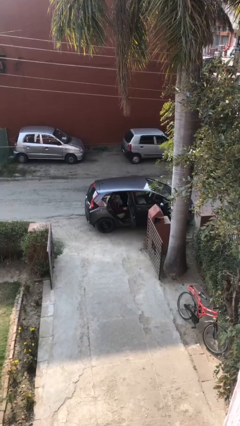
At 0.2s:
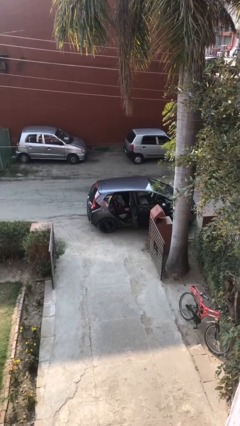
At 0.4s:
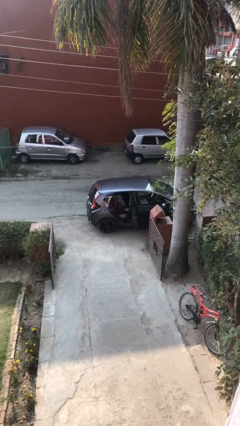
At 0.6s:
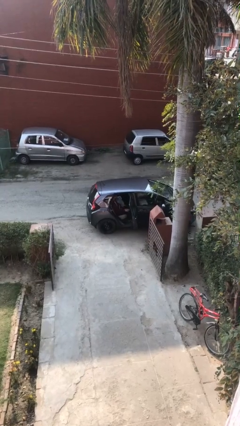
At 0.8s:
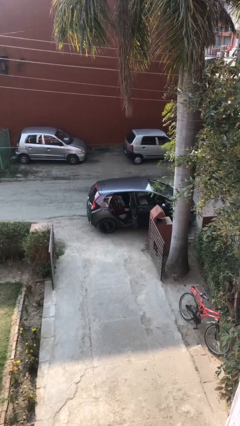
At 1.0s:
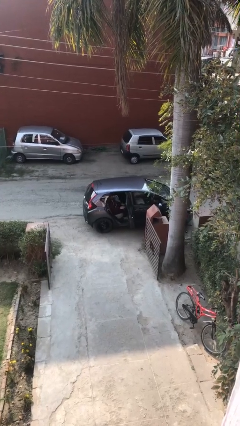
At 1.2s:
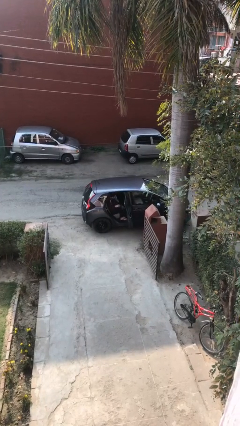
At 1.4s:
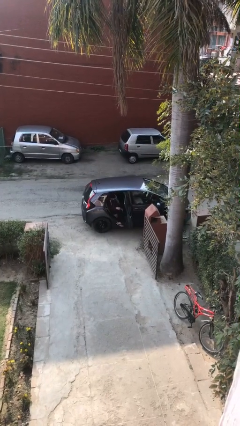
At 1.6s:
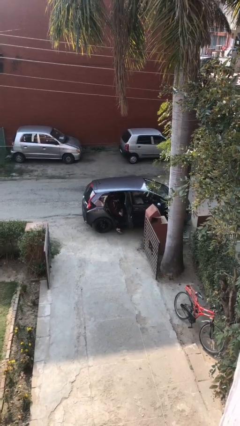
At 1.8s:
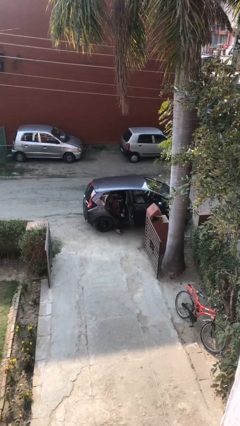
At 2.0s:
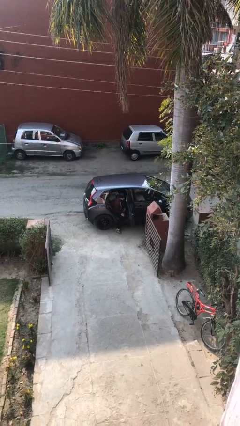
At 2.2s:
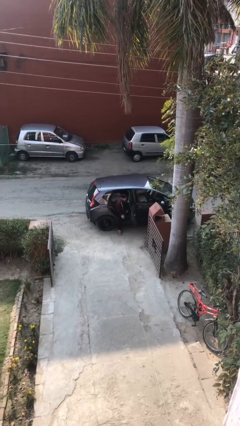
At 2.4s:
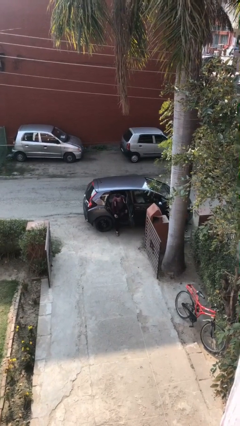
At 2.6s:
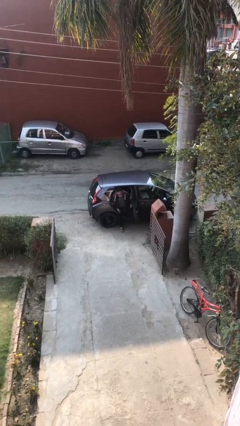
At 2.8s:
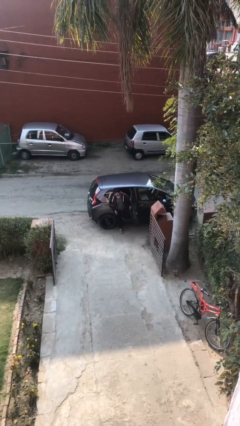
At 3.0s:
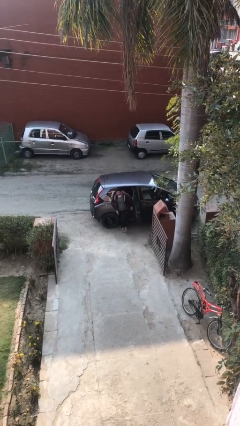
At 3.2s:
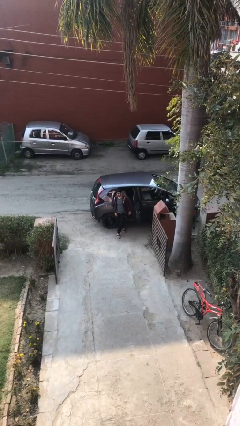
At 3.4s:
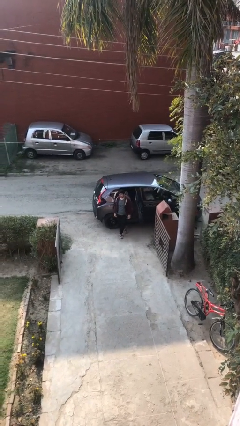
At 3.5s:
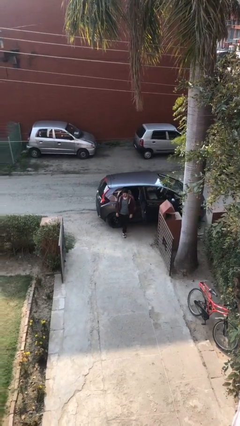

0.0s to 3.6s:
person exits car

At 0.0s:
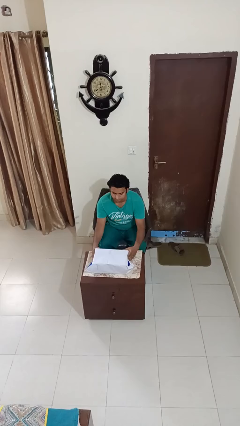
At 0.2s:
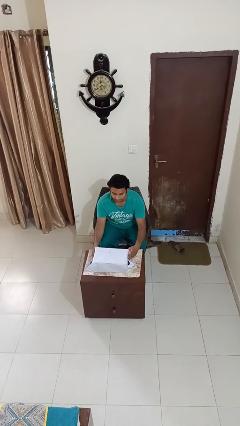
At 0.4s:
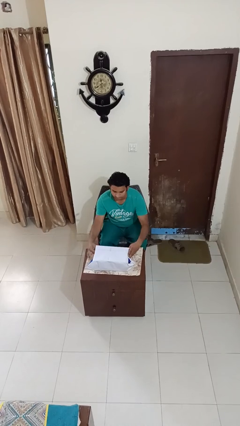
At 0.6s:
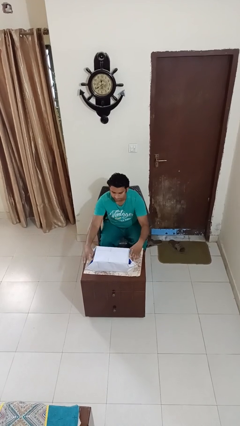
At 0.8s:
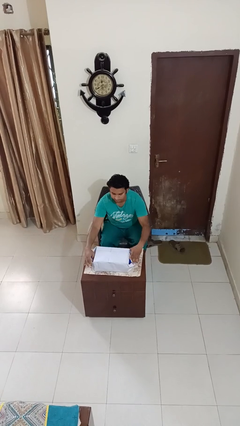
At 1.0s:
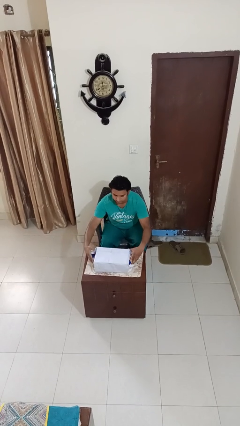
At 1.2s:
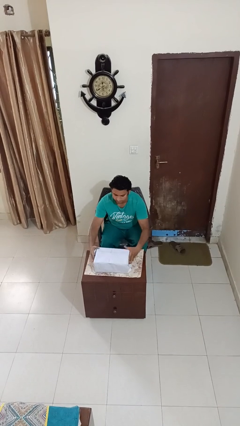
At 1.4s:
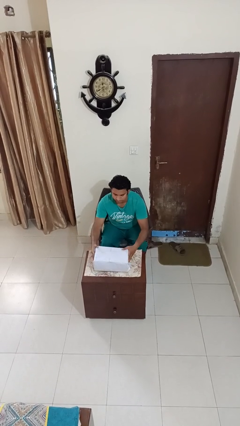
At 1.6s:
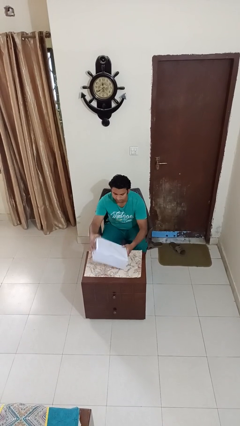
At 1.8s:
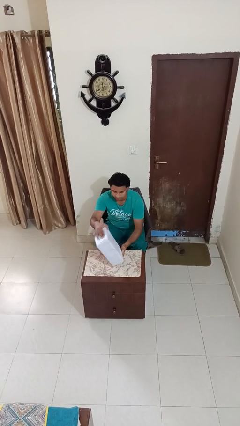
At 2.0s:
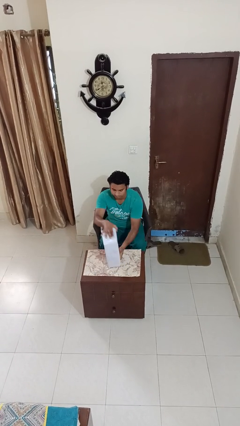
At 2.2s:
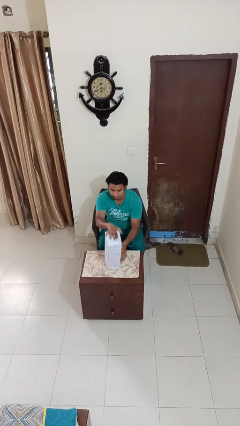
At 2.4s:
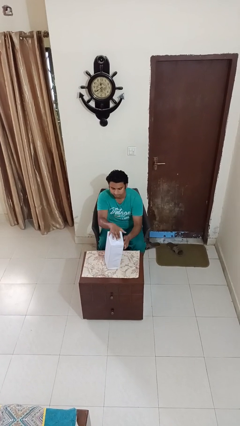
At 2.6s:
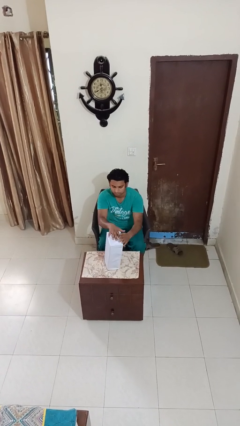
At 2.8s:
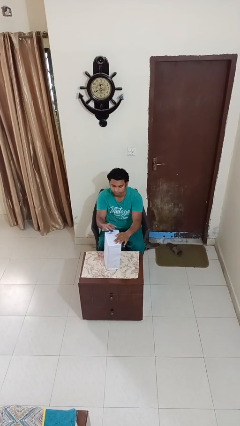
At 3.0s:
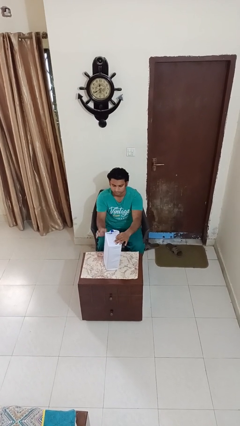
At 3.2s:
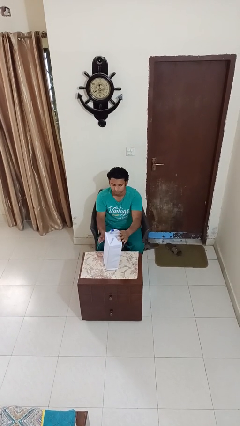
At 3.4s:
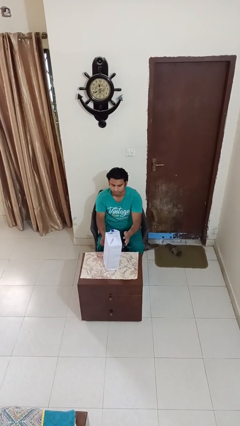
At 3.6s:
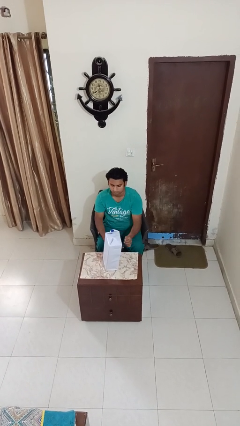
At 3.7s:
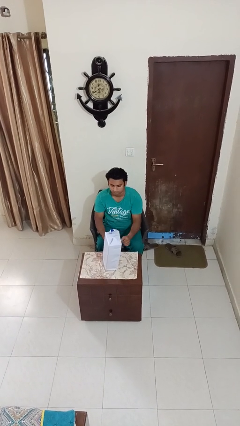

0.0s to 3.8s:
person wraps box

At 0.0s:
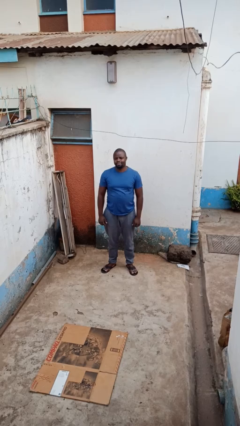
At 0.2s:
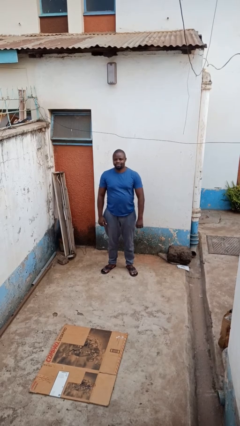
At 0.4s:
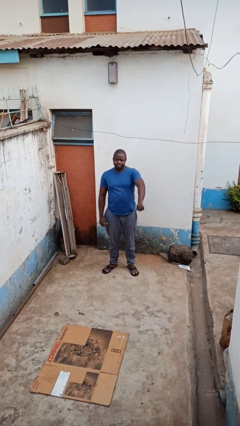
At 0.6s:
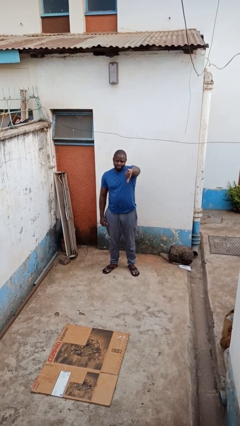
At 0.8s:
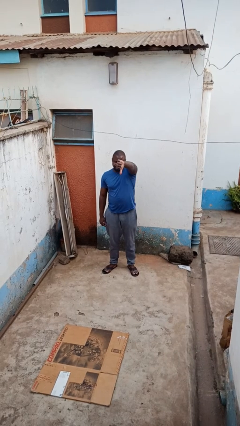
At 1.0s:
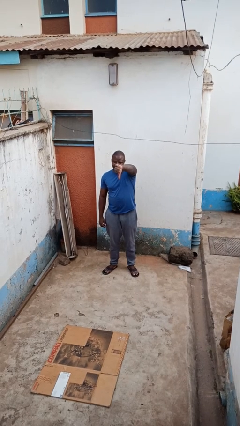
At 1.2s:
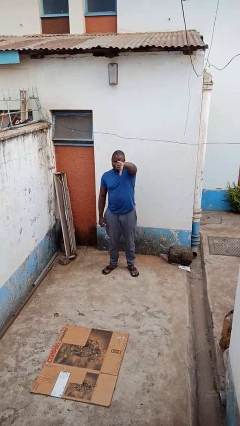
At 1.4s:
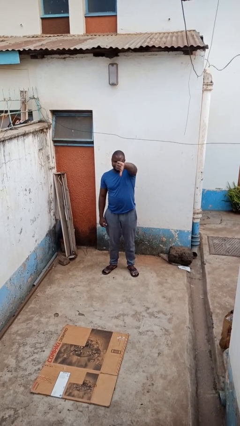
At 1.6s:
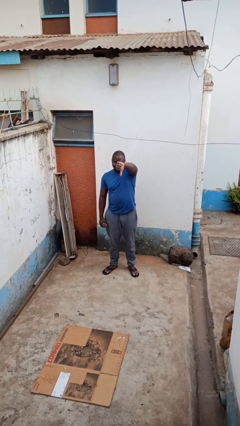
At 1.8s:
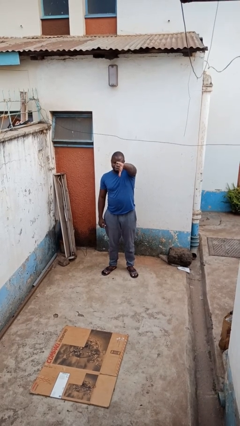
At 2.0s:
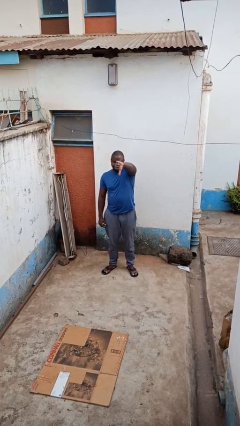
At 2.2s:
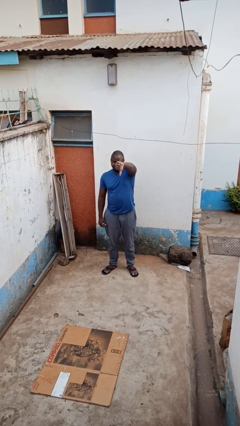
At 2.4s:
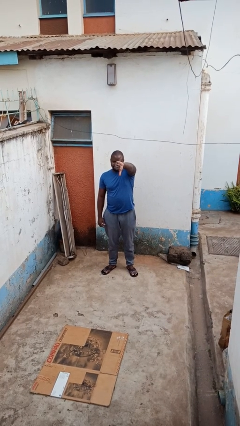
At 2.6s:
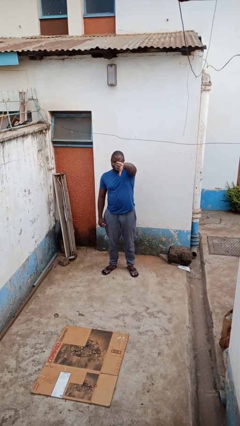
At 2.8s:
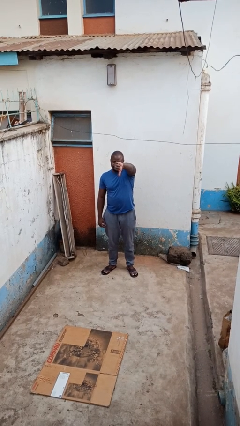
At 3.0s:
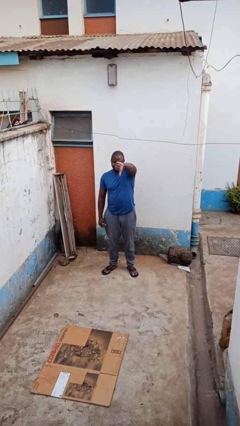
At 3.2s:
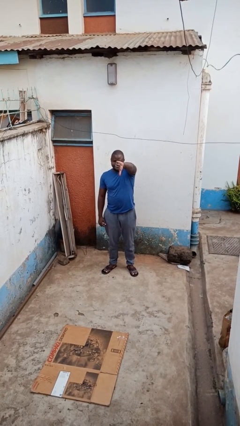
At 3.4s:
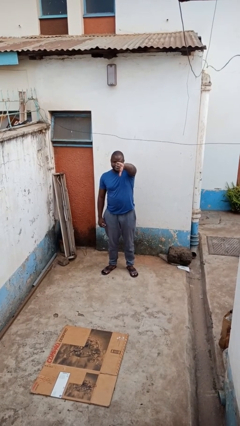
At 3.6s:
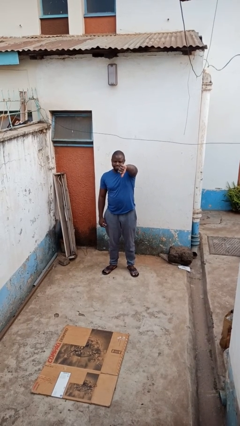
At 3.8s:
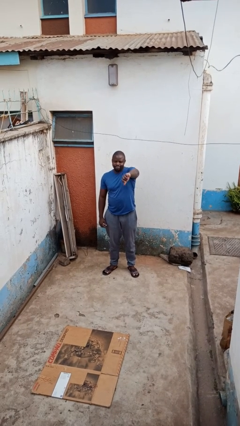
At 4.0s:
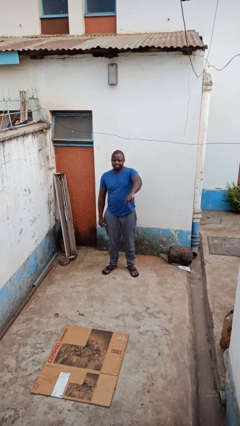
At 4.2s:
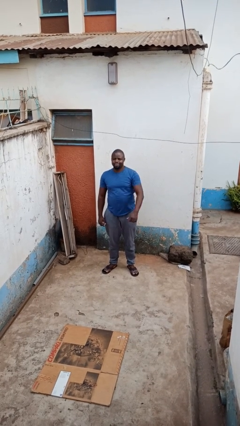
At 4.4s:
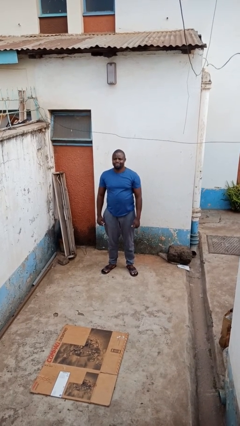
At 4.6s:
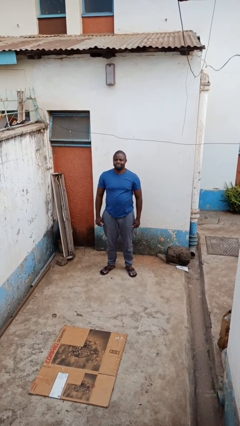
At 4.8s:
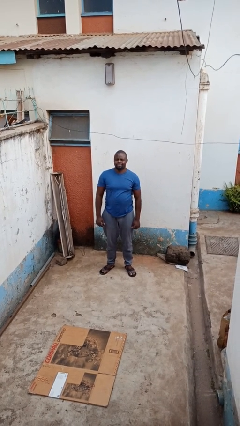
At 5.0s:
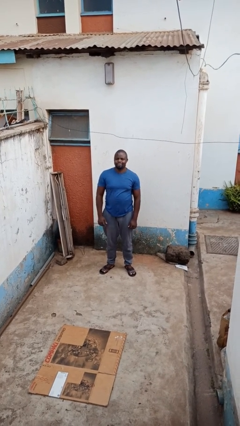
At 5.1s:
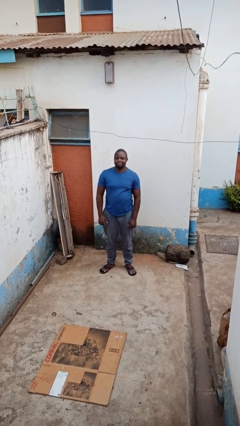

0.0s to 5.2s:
person gestures thumbs down

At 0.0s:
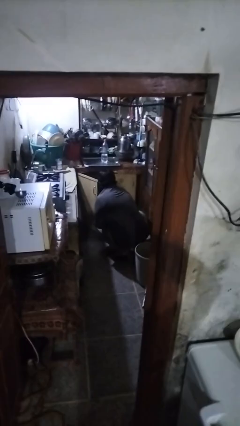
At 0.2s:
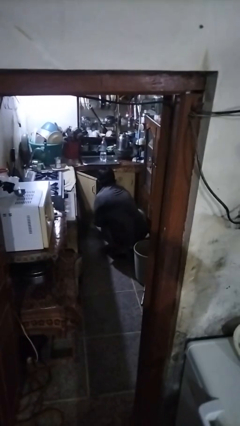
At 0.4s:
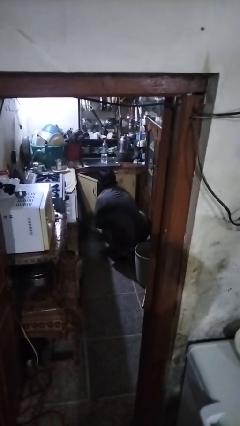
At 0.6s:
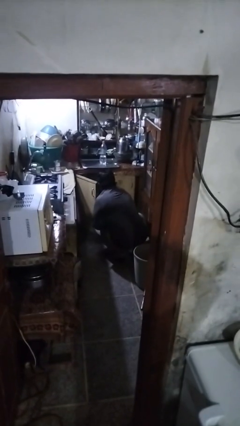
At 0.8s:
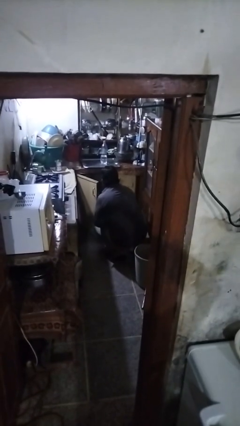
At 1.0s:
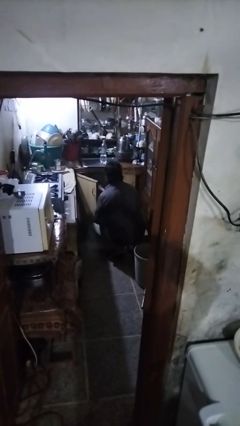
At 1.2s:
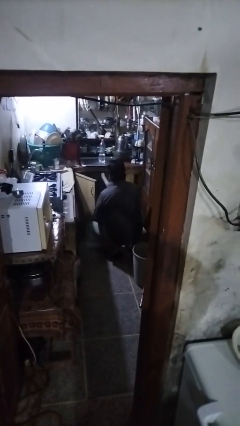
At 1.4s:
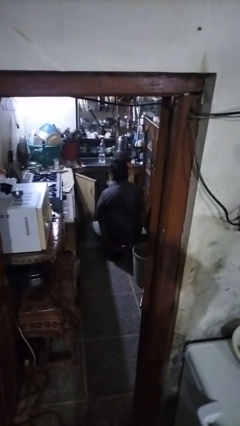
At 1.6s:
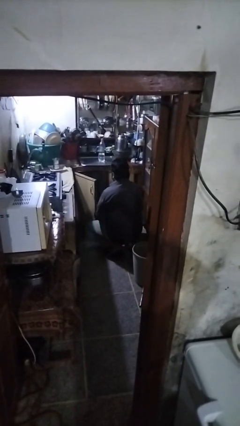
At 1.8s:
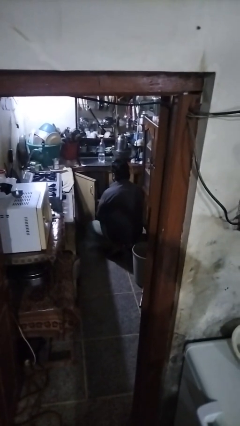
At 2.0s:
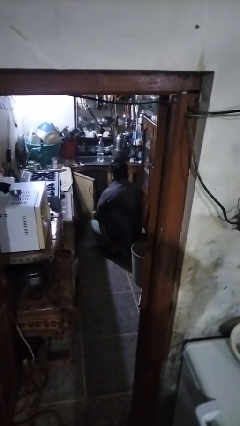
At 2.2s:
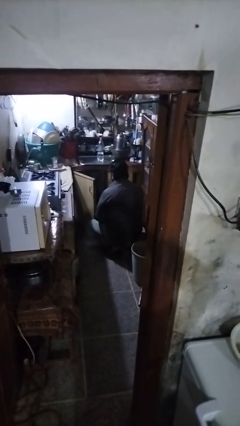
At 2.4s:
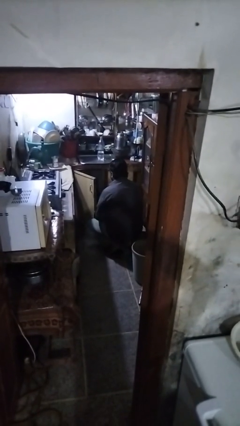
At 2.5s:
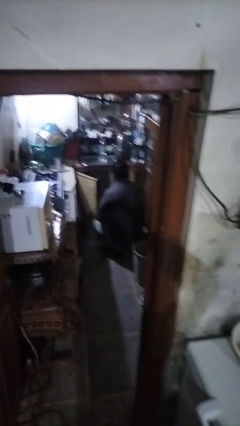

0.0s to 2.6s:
person takes object from cabinet

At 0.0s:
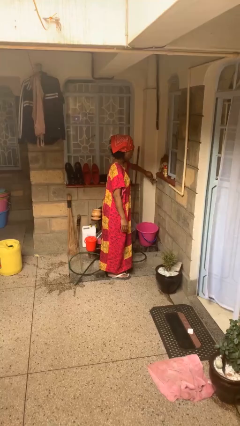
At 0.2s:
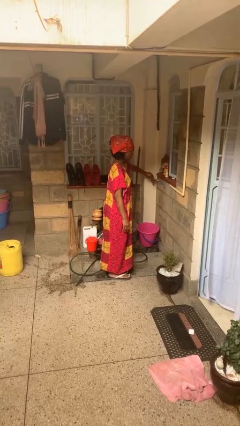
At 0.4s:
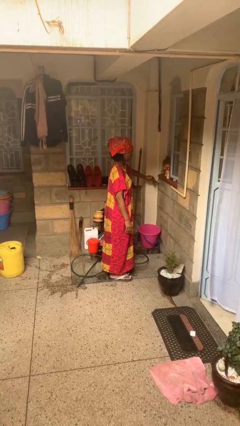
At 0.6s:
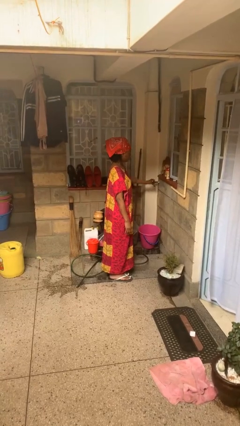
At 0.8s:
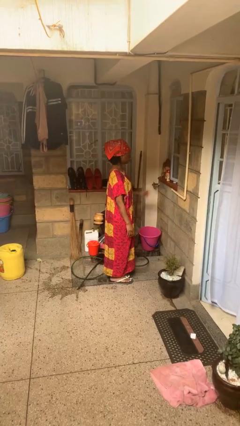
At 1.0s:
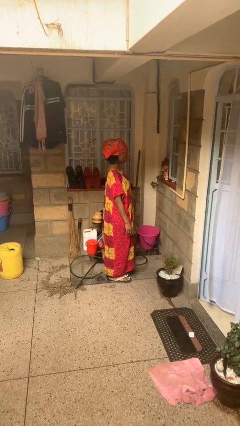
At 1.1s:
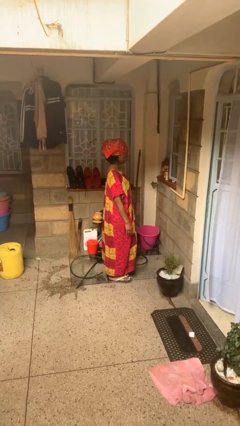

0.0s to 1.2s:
person turns off faucet

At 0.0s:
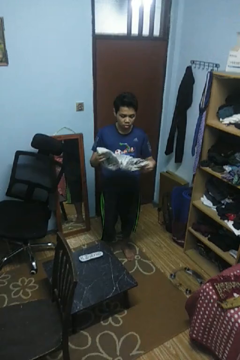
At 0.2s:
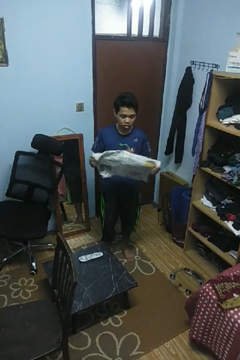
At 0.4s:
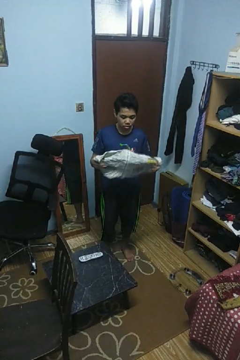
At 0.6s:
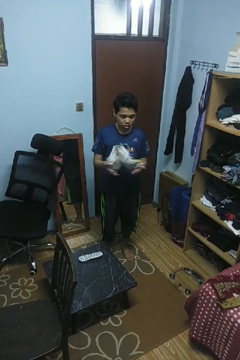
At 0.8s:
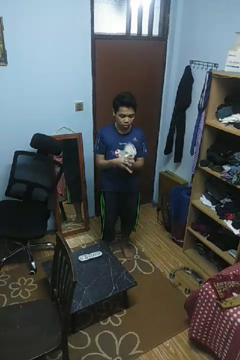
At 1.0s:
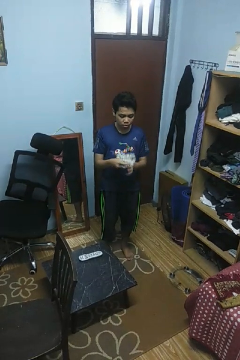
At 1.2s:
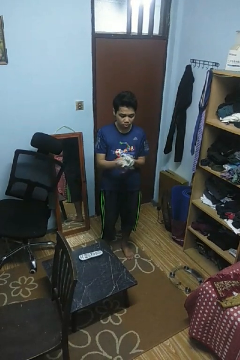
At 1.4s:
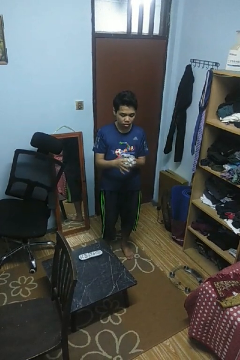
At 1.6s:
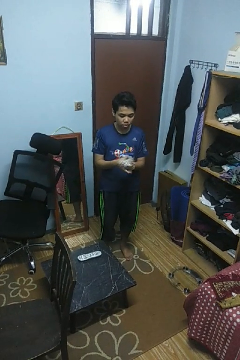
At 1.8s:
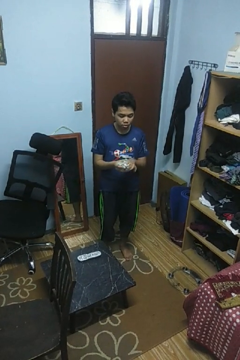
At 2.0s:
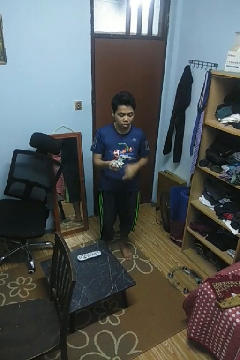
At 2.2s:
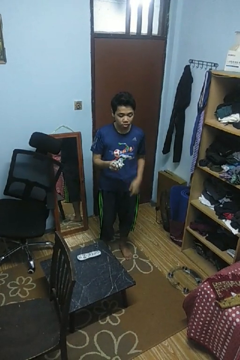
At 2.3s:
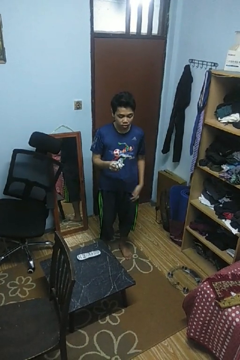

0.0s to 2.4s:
person crumples paper
